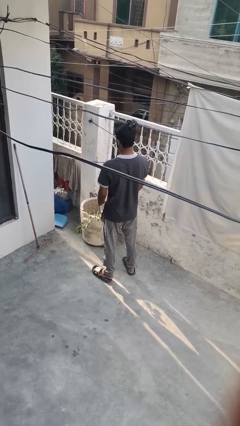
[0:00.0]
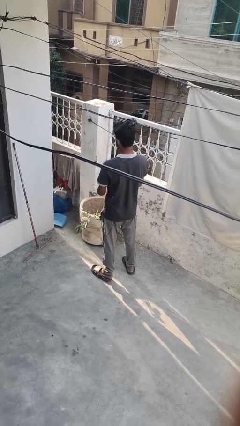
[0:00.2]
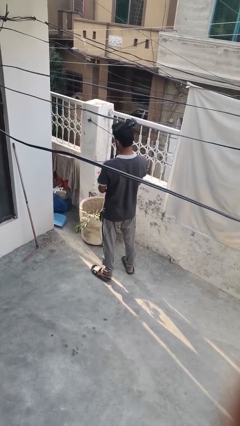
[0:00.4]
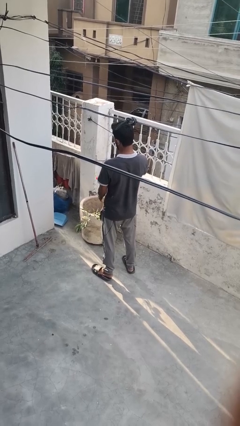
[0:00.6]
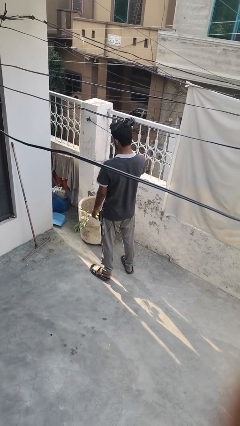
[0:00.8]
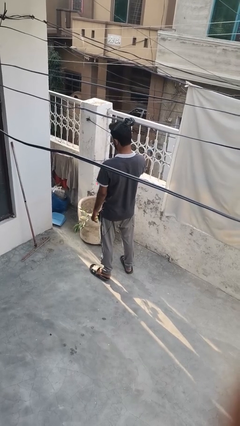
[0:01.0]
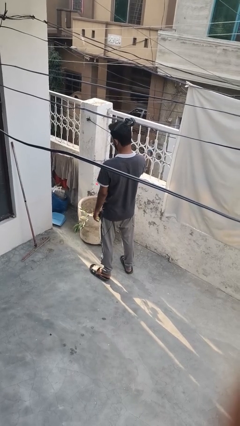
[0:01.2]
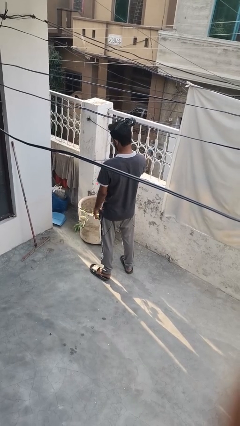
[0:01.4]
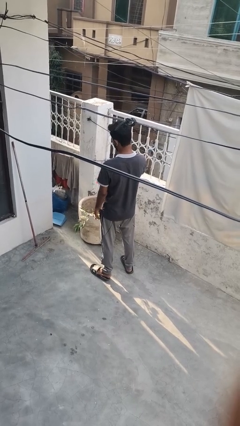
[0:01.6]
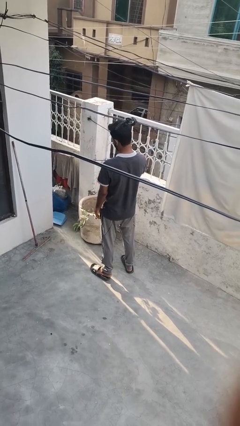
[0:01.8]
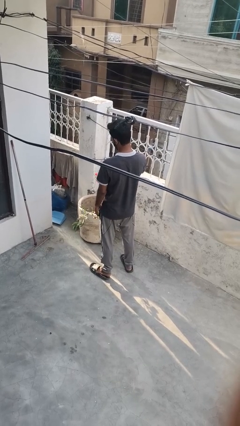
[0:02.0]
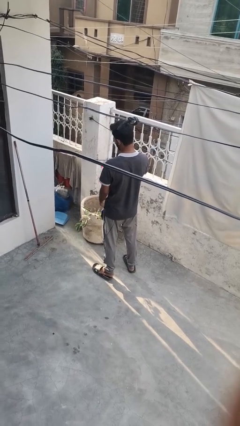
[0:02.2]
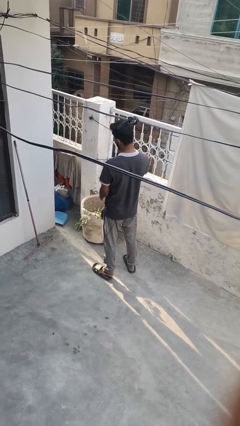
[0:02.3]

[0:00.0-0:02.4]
person waters houseplant

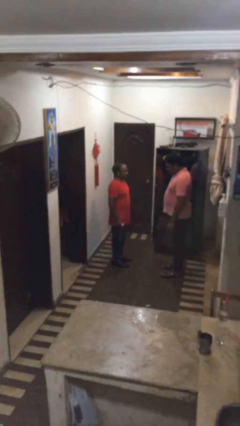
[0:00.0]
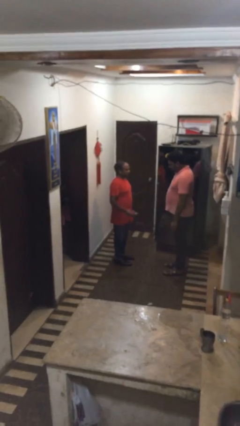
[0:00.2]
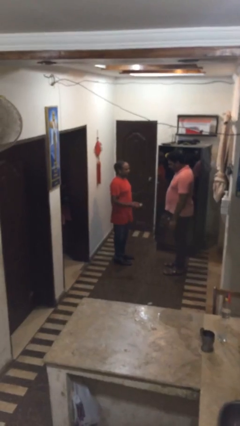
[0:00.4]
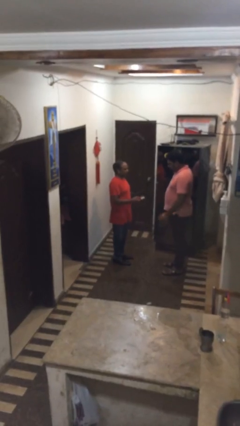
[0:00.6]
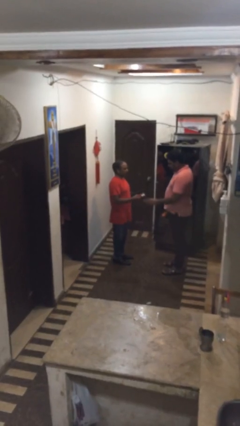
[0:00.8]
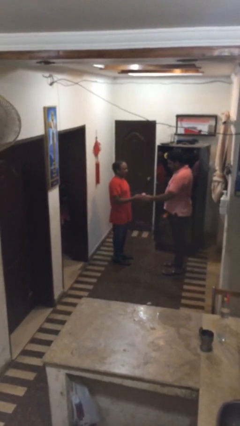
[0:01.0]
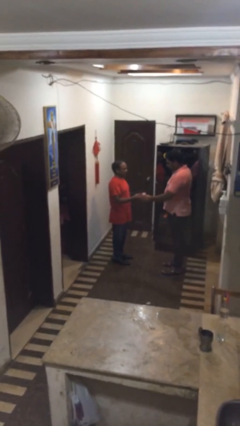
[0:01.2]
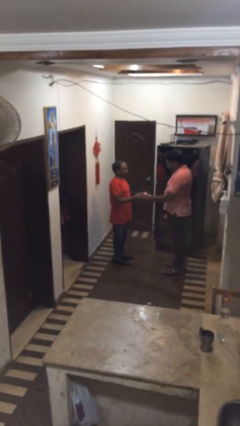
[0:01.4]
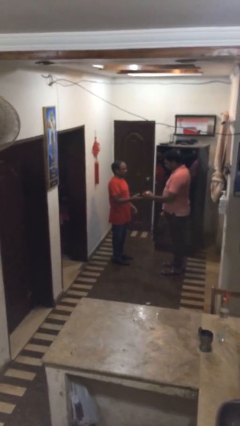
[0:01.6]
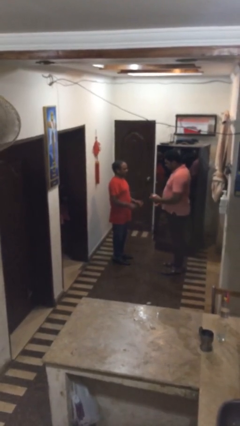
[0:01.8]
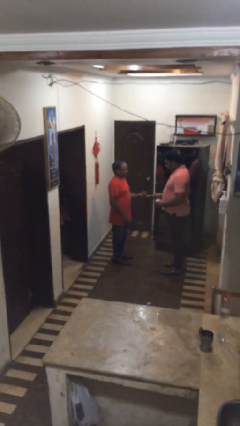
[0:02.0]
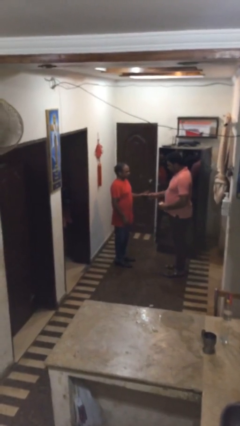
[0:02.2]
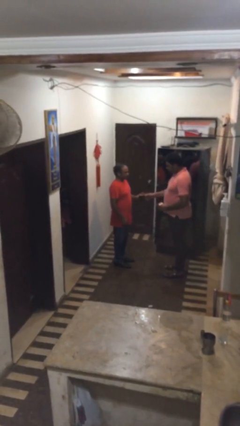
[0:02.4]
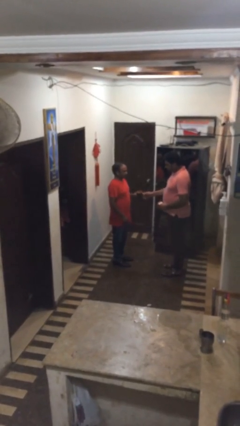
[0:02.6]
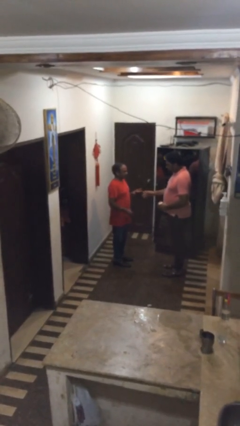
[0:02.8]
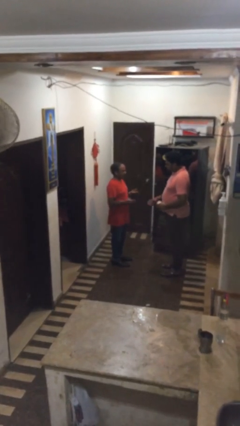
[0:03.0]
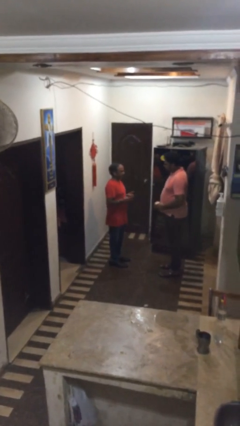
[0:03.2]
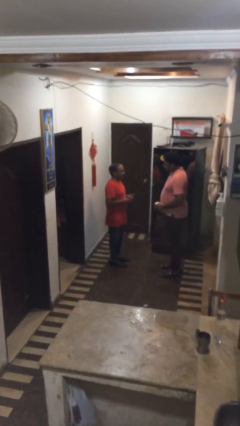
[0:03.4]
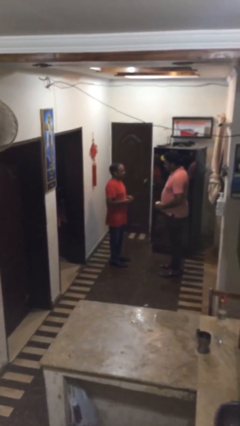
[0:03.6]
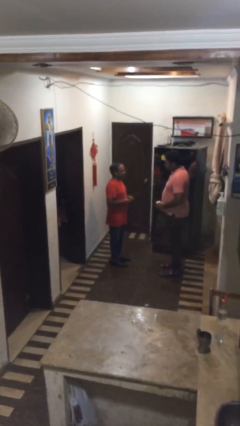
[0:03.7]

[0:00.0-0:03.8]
person transfers object to person

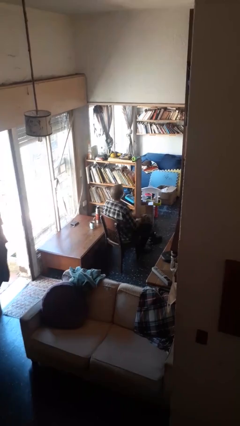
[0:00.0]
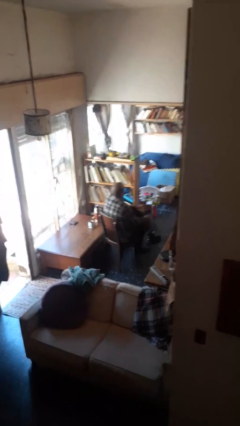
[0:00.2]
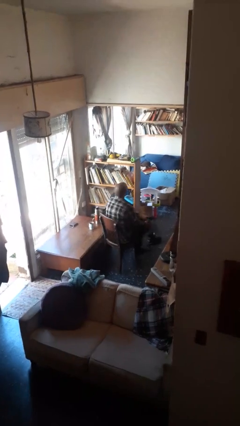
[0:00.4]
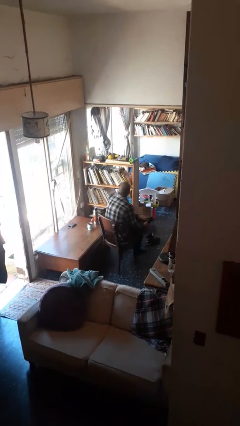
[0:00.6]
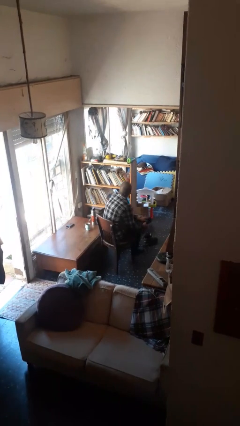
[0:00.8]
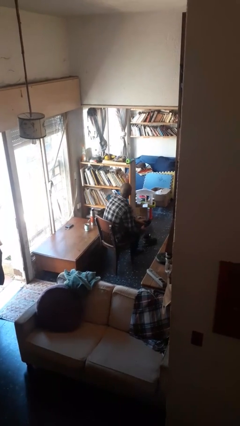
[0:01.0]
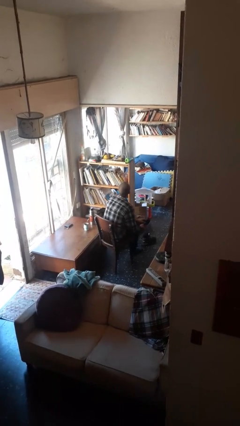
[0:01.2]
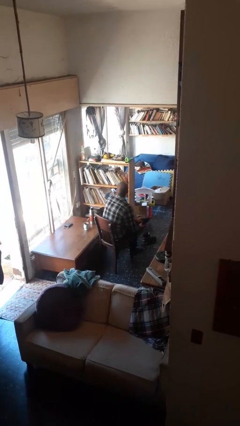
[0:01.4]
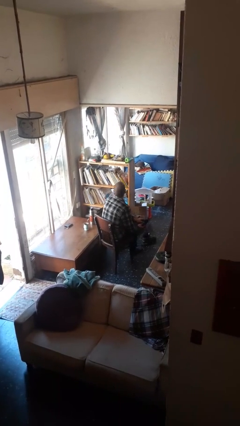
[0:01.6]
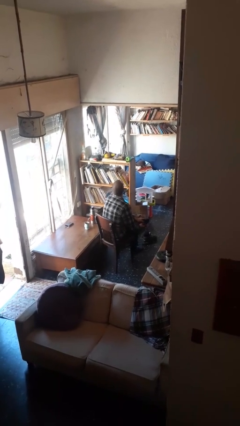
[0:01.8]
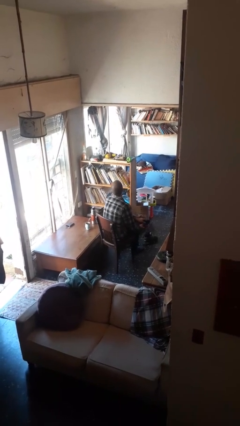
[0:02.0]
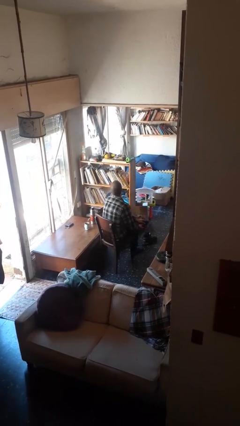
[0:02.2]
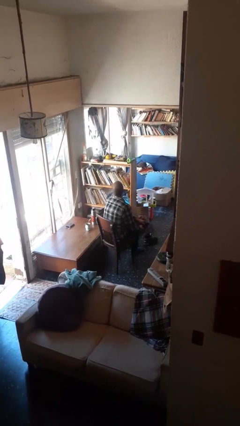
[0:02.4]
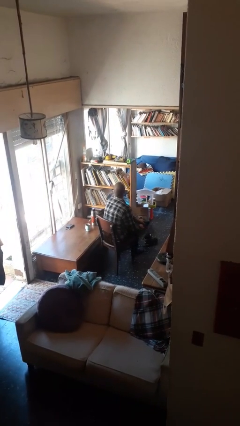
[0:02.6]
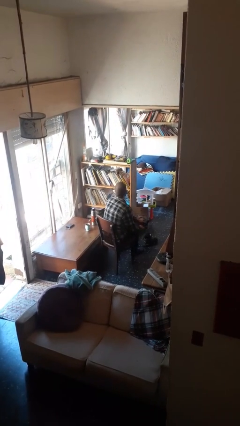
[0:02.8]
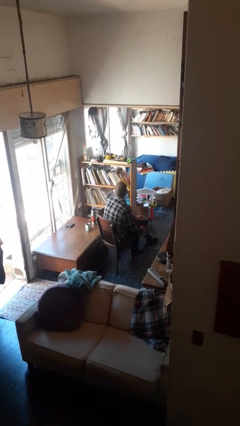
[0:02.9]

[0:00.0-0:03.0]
person rubs foot

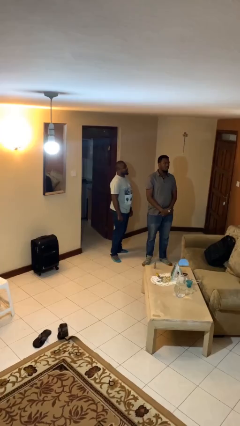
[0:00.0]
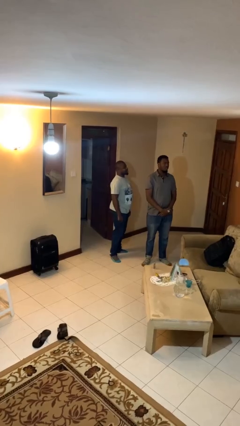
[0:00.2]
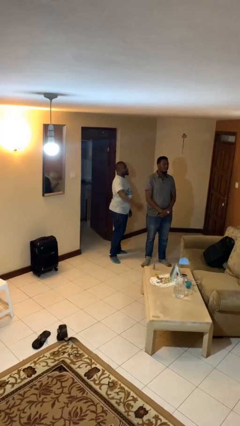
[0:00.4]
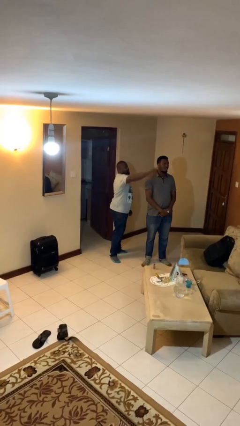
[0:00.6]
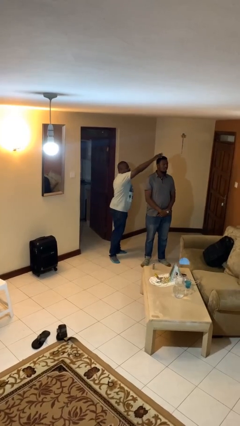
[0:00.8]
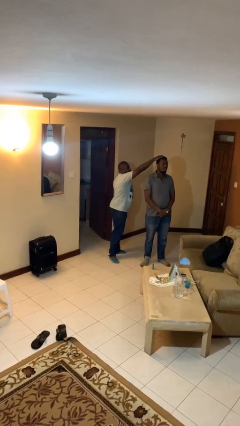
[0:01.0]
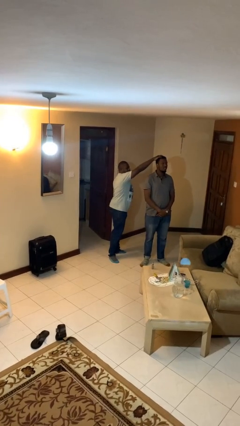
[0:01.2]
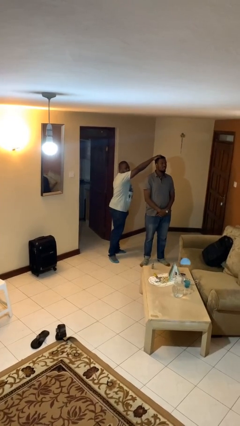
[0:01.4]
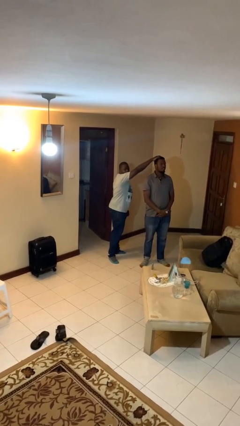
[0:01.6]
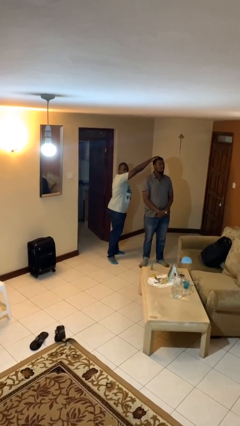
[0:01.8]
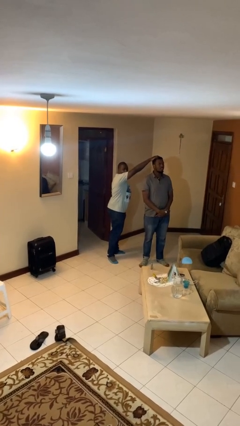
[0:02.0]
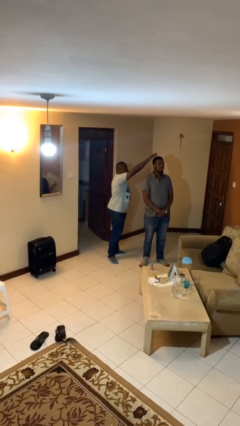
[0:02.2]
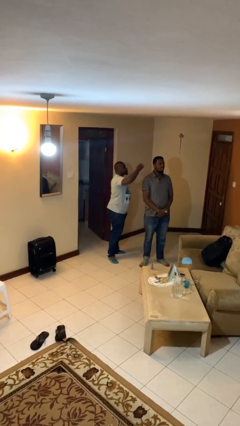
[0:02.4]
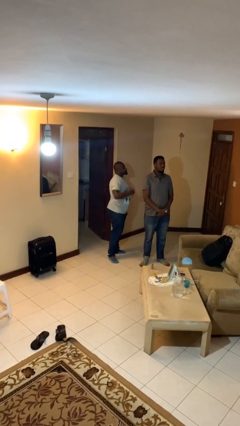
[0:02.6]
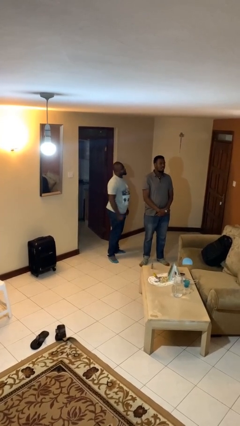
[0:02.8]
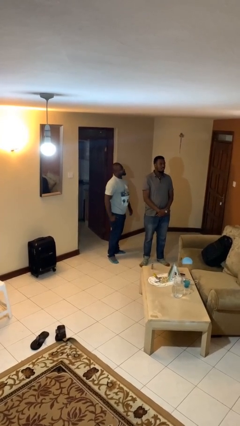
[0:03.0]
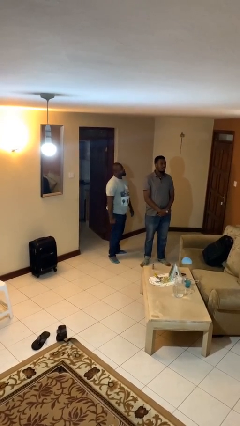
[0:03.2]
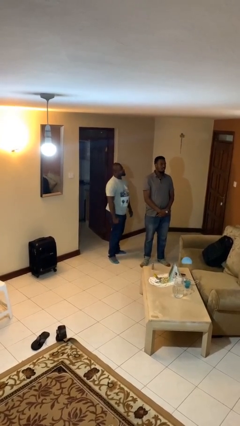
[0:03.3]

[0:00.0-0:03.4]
person grabs person by hair

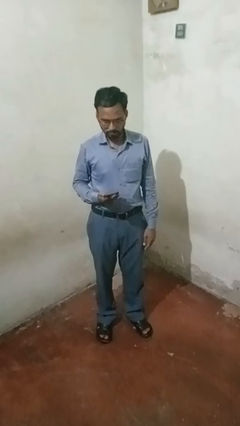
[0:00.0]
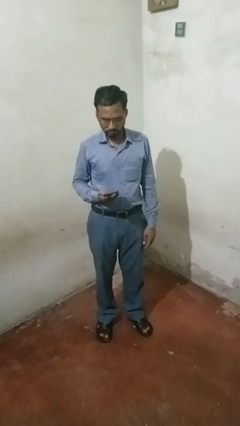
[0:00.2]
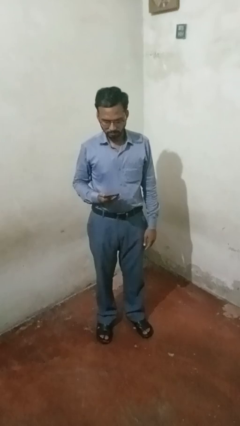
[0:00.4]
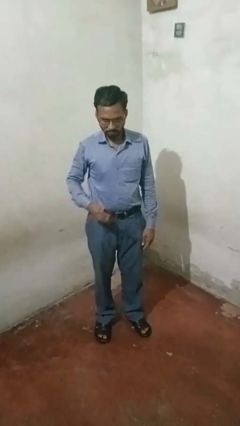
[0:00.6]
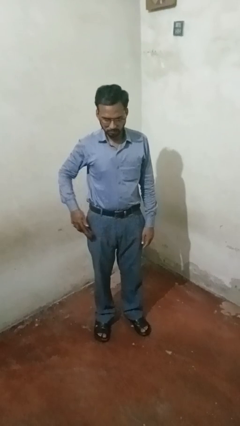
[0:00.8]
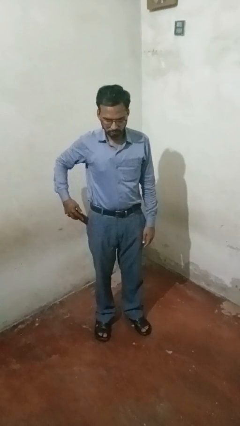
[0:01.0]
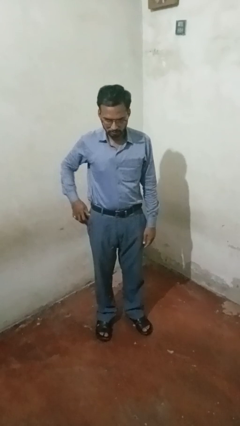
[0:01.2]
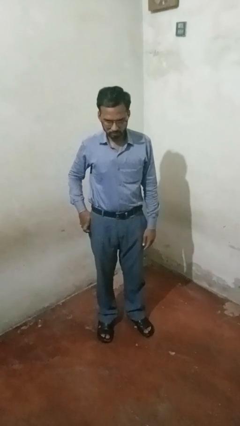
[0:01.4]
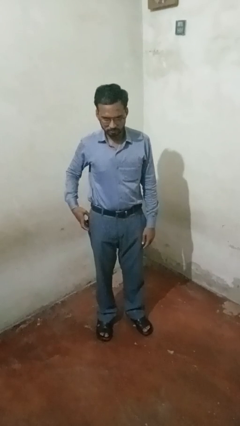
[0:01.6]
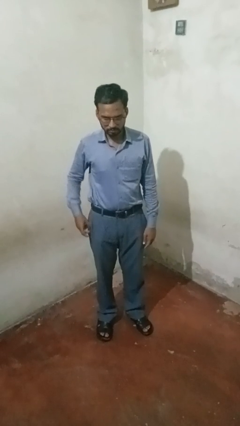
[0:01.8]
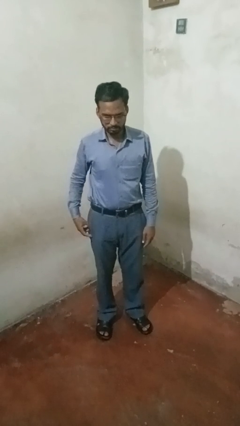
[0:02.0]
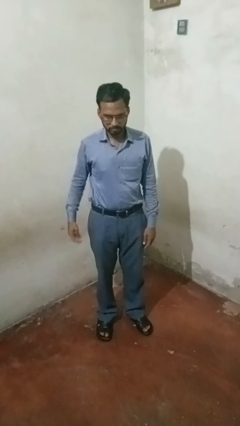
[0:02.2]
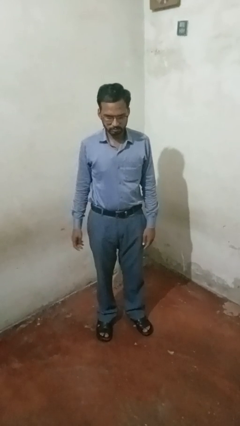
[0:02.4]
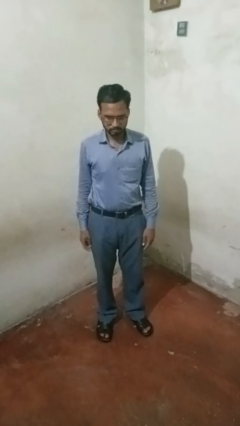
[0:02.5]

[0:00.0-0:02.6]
person puts phone into pocket

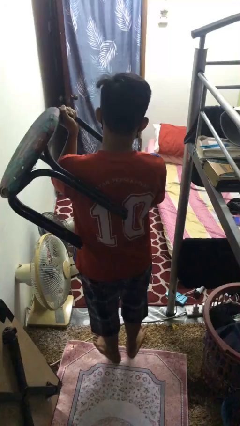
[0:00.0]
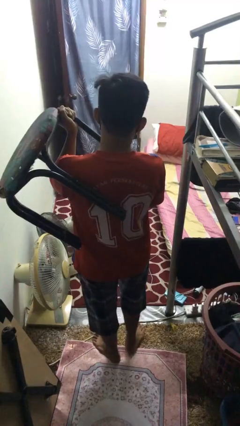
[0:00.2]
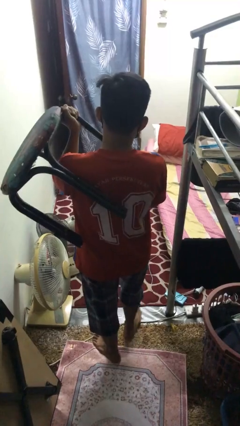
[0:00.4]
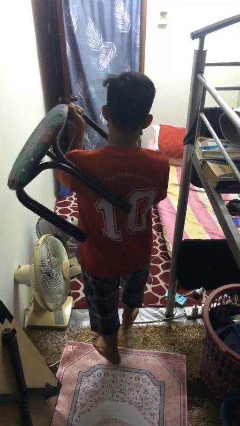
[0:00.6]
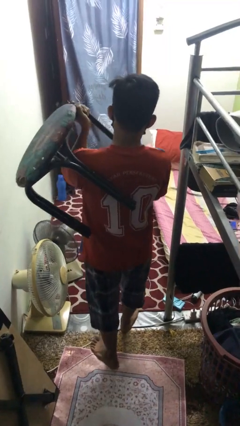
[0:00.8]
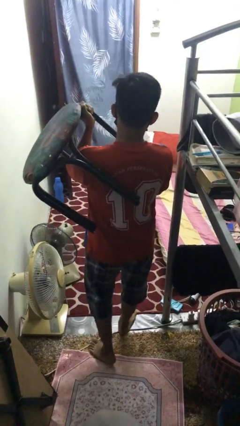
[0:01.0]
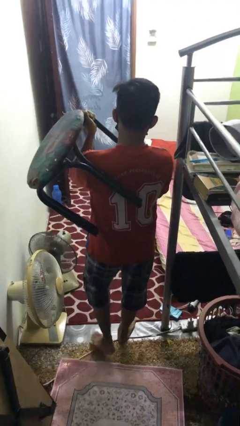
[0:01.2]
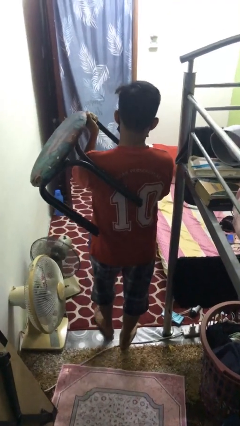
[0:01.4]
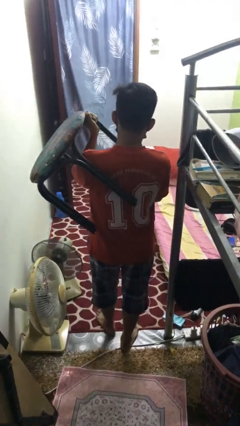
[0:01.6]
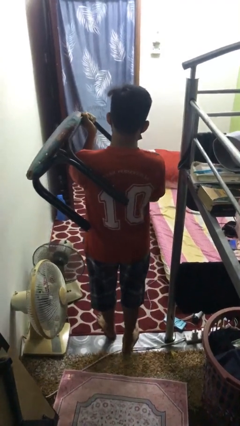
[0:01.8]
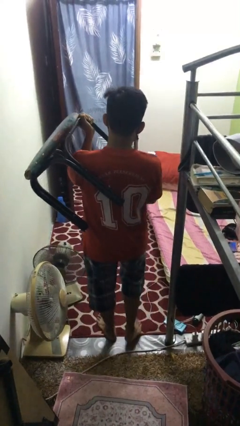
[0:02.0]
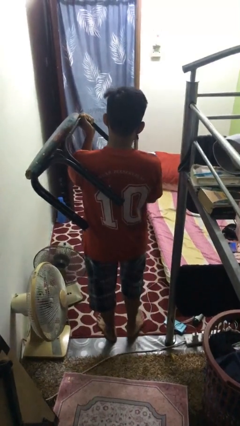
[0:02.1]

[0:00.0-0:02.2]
person carries furniture

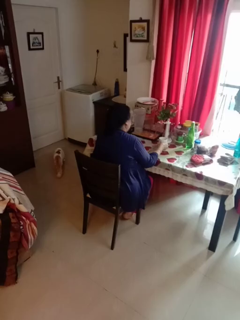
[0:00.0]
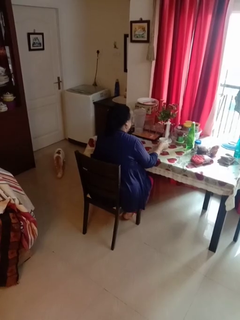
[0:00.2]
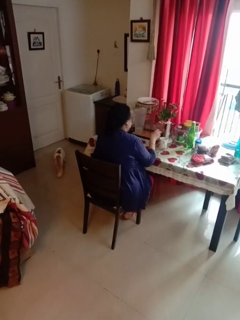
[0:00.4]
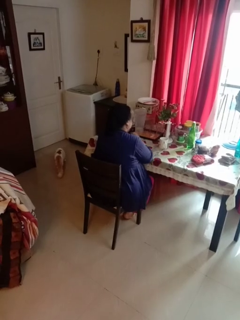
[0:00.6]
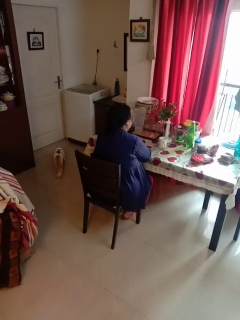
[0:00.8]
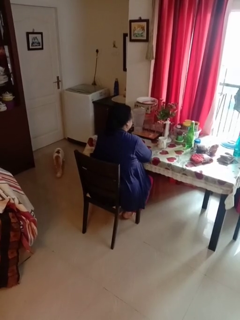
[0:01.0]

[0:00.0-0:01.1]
person puts down object on table
